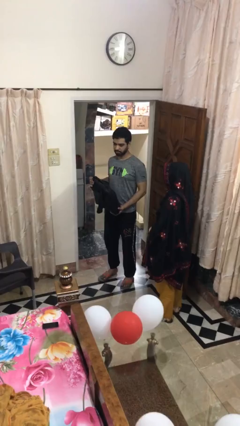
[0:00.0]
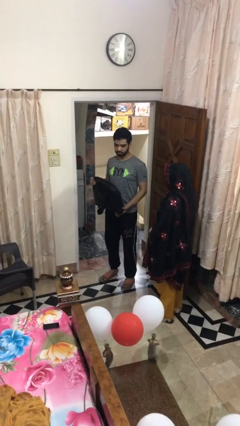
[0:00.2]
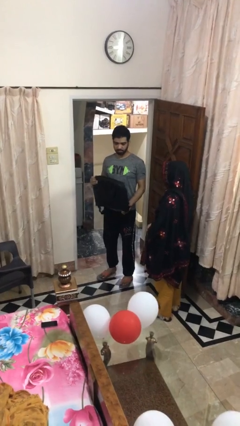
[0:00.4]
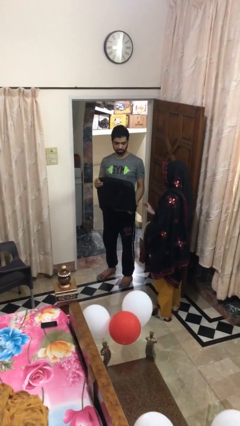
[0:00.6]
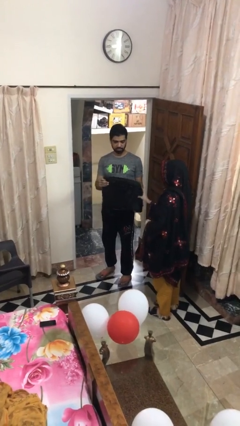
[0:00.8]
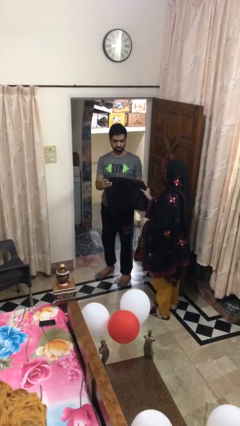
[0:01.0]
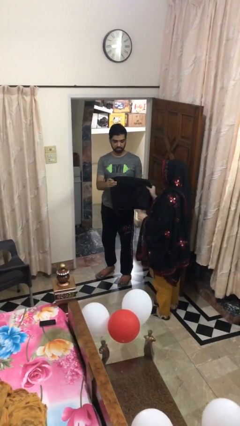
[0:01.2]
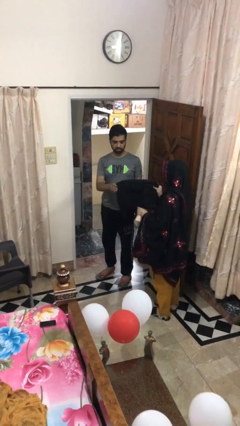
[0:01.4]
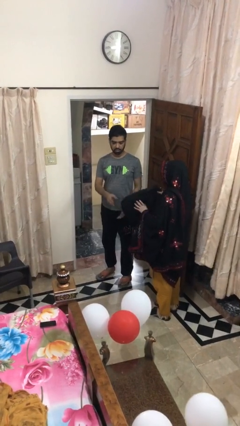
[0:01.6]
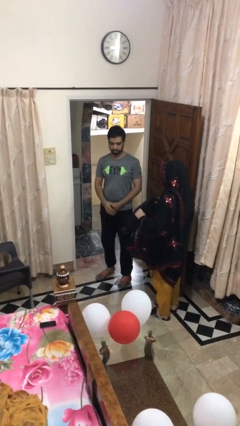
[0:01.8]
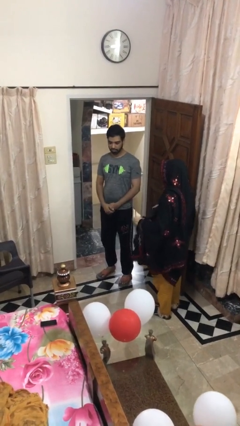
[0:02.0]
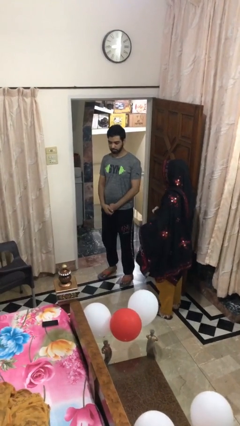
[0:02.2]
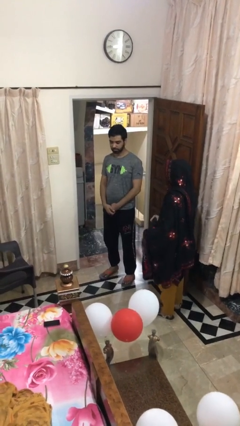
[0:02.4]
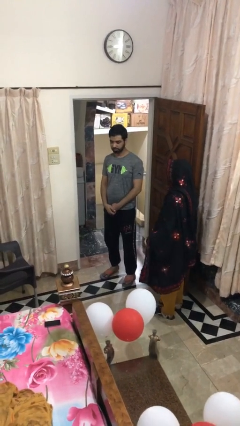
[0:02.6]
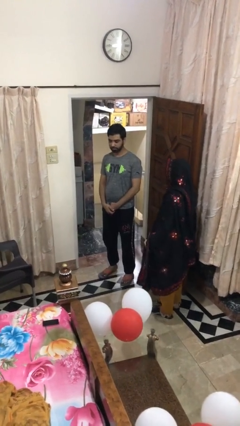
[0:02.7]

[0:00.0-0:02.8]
person transfers object to person

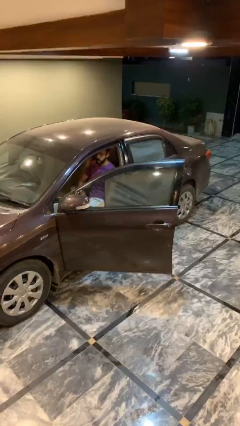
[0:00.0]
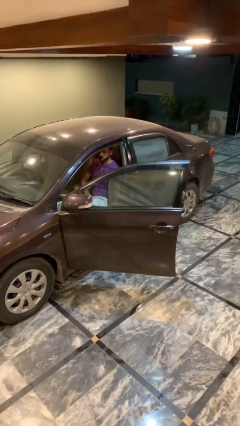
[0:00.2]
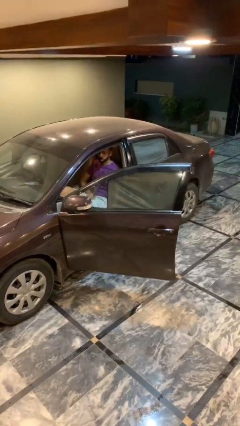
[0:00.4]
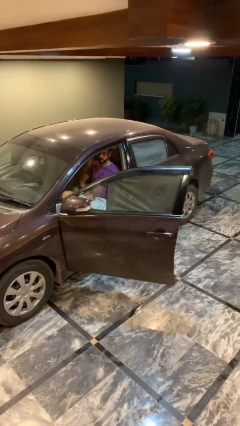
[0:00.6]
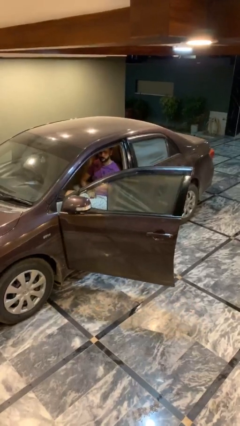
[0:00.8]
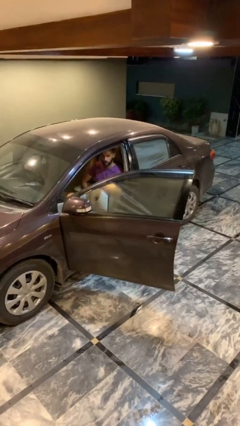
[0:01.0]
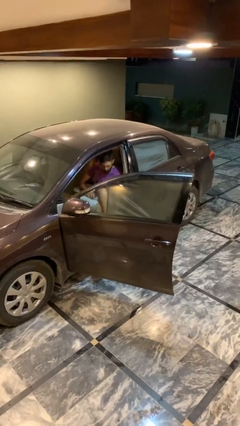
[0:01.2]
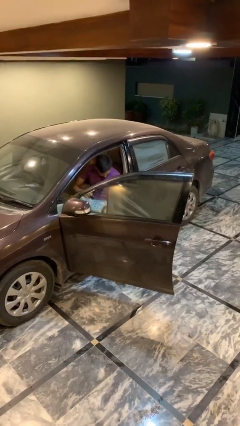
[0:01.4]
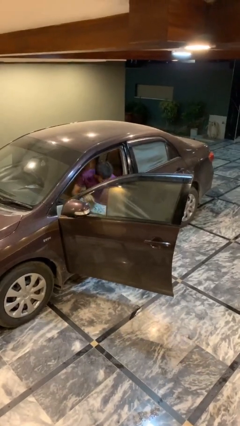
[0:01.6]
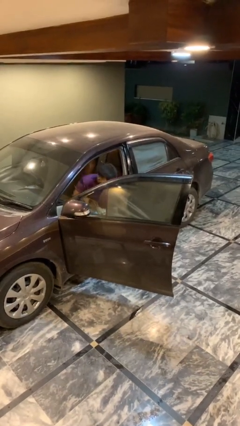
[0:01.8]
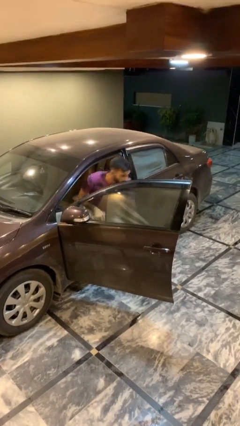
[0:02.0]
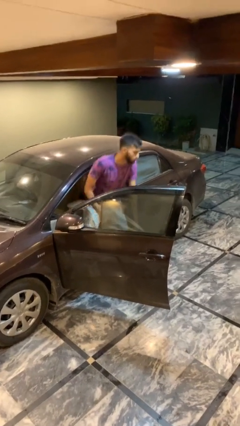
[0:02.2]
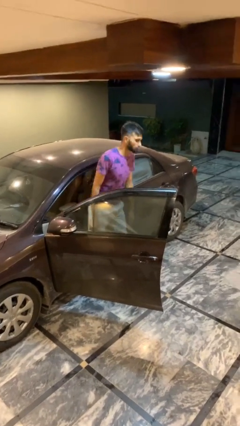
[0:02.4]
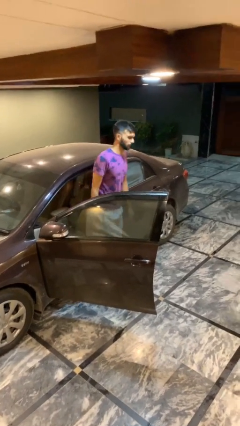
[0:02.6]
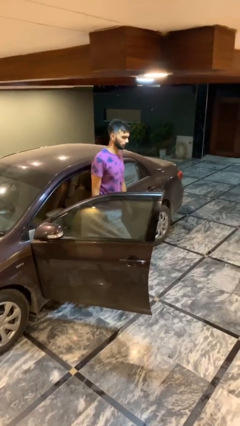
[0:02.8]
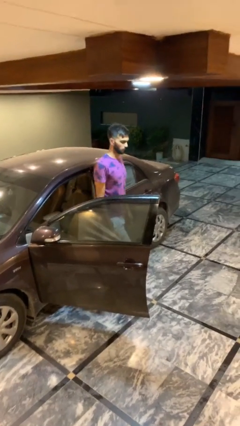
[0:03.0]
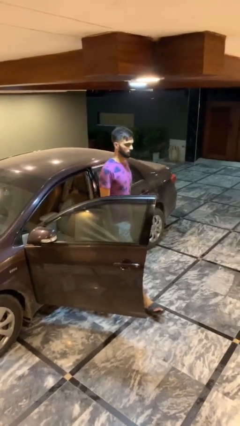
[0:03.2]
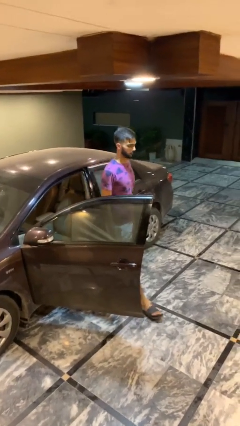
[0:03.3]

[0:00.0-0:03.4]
person exits car

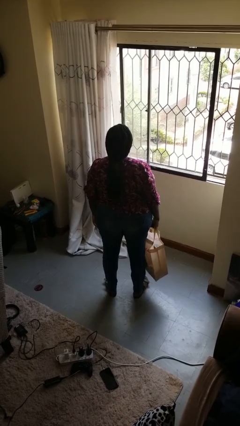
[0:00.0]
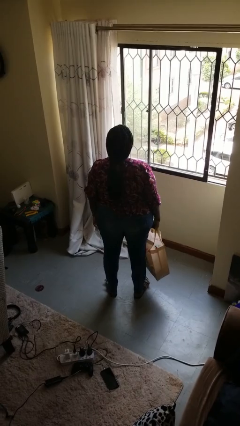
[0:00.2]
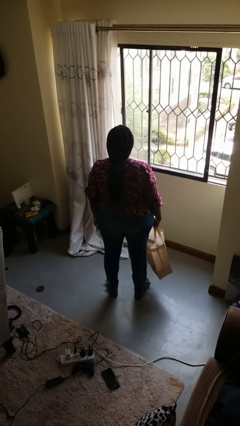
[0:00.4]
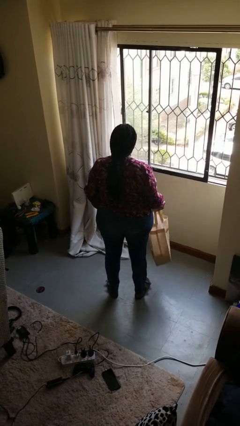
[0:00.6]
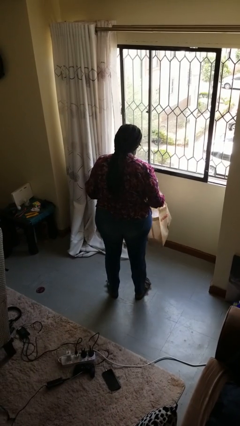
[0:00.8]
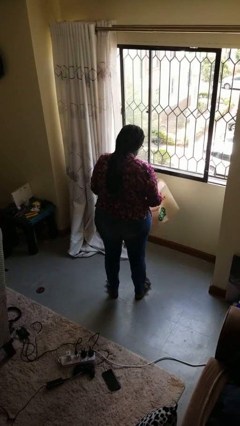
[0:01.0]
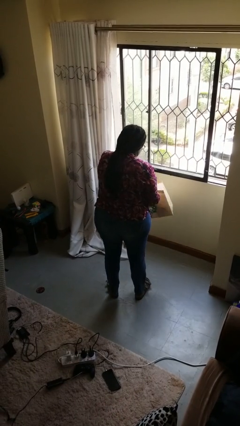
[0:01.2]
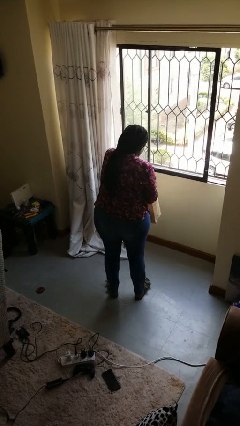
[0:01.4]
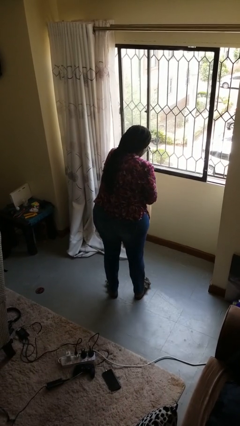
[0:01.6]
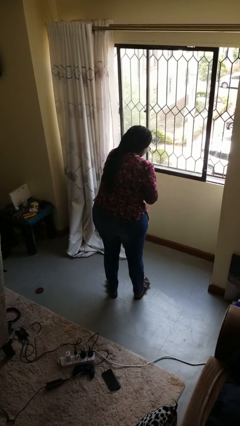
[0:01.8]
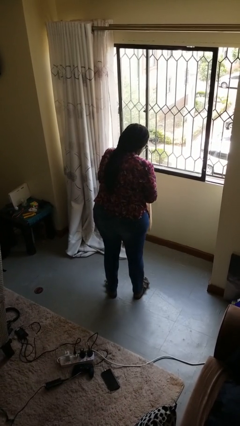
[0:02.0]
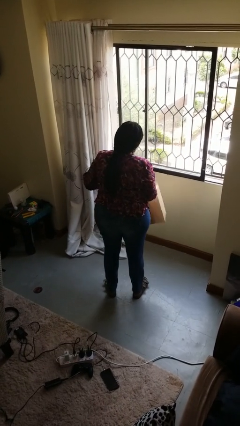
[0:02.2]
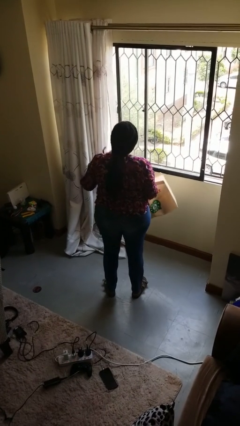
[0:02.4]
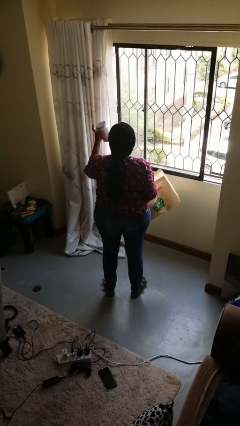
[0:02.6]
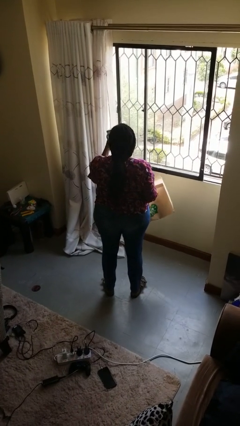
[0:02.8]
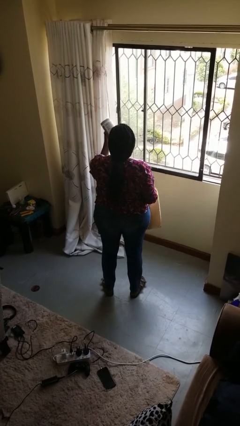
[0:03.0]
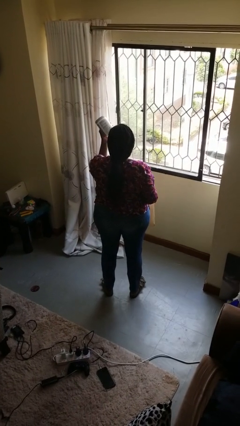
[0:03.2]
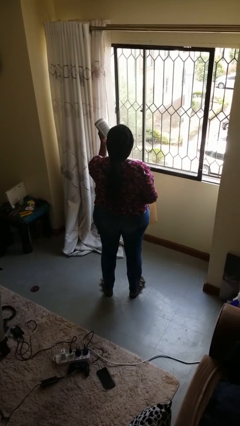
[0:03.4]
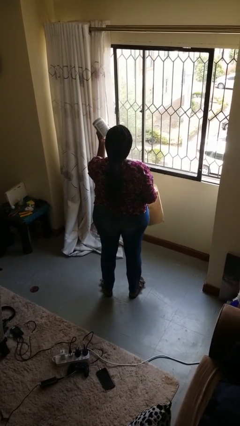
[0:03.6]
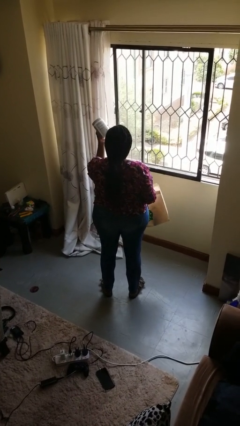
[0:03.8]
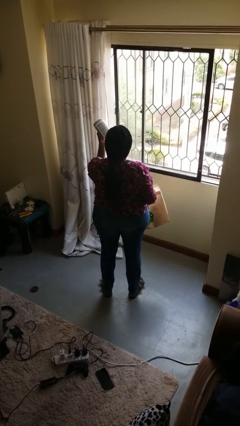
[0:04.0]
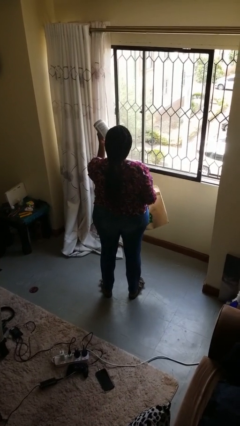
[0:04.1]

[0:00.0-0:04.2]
person takes object from bag

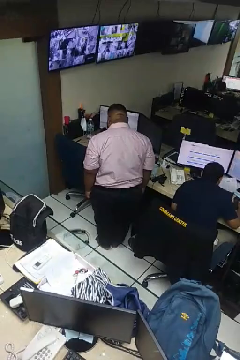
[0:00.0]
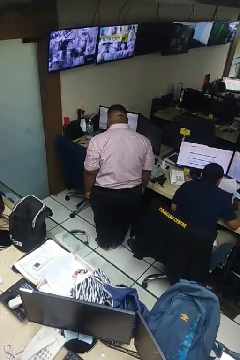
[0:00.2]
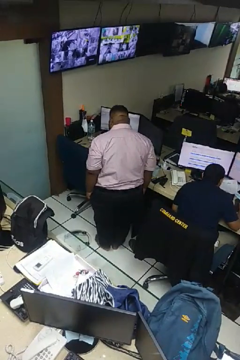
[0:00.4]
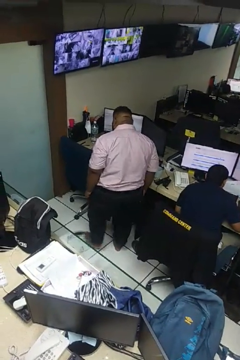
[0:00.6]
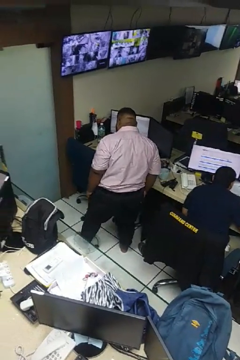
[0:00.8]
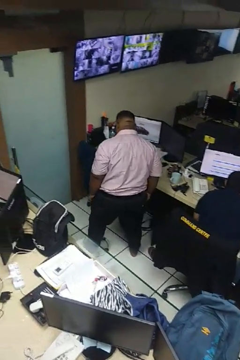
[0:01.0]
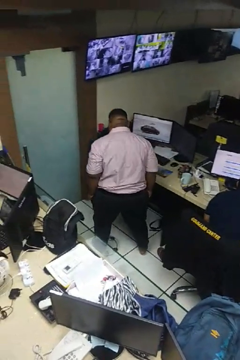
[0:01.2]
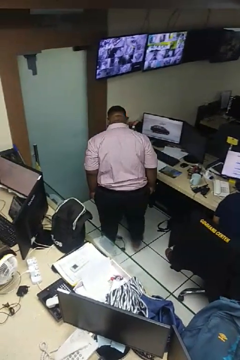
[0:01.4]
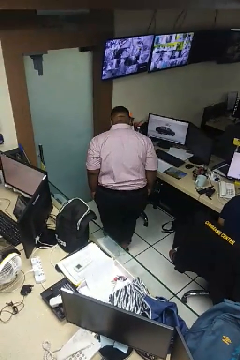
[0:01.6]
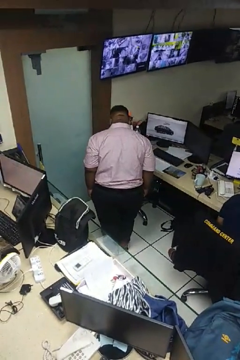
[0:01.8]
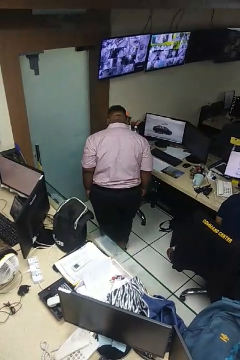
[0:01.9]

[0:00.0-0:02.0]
person uses bodyweight scale

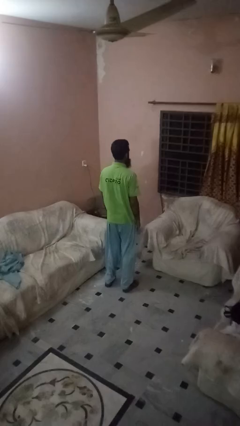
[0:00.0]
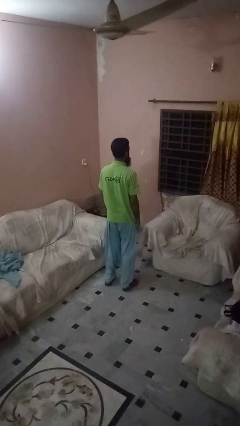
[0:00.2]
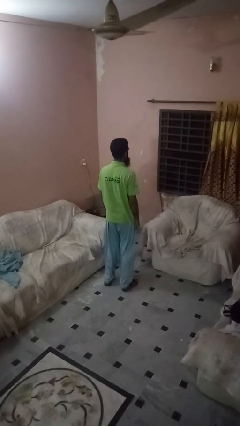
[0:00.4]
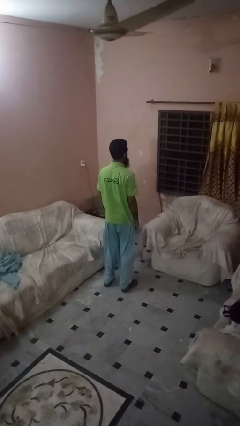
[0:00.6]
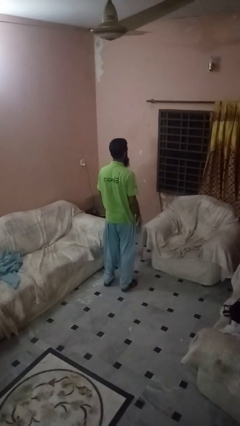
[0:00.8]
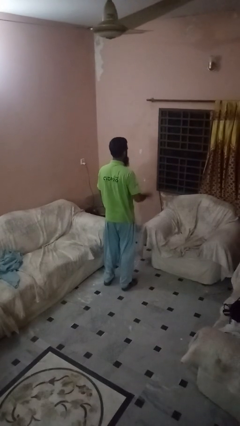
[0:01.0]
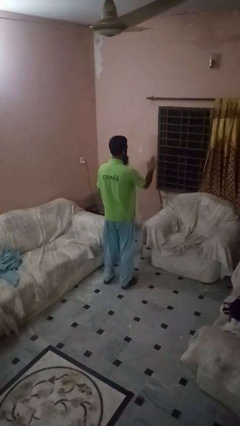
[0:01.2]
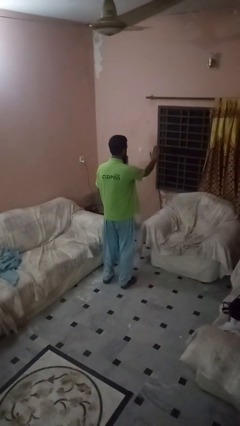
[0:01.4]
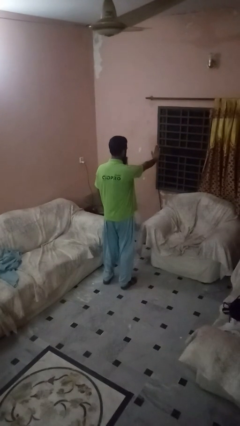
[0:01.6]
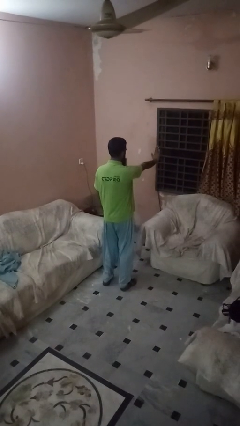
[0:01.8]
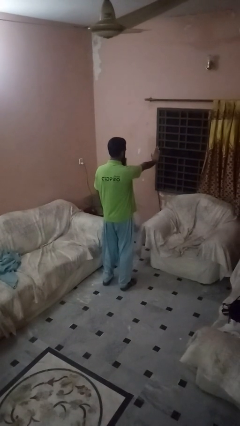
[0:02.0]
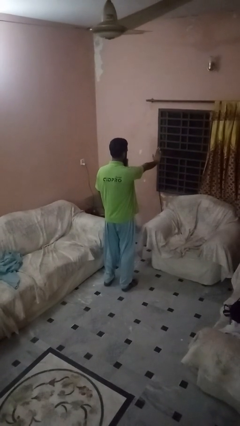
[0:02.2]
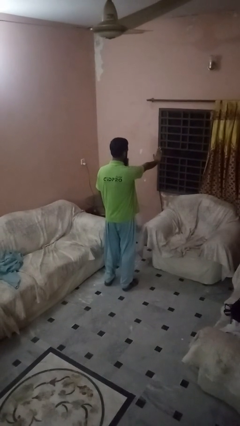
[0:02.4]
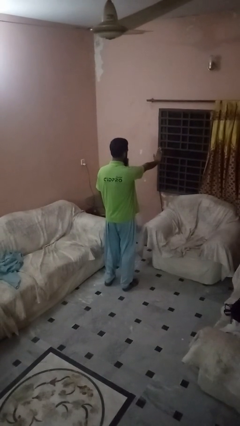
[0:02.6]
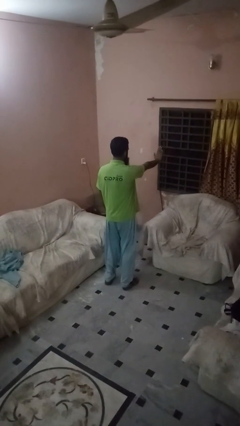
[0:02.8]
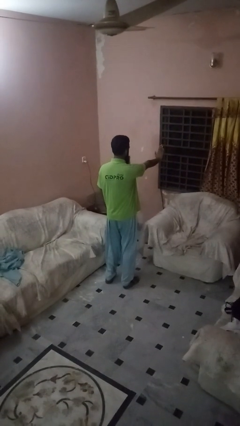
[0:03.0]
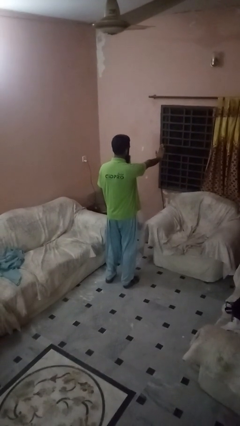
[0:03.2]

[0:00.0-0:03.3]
person gestures stop

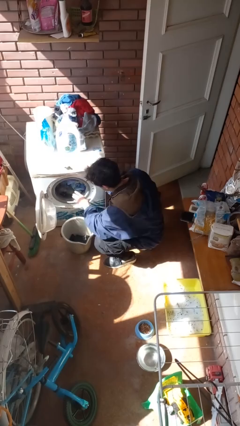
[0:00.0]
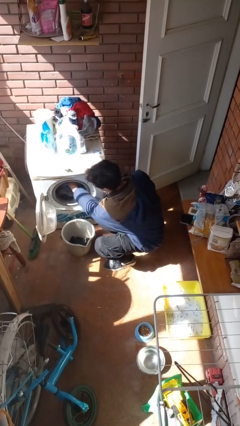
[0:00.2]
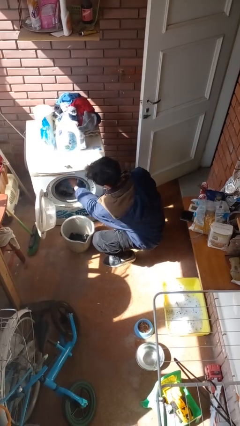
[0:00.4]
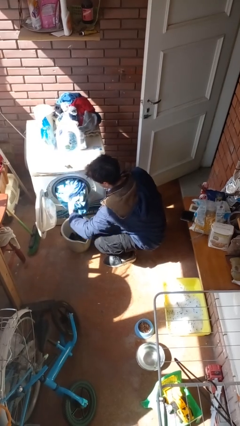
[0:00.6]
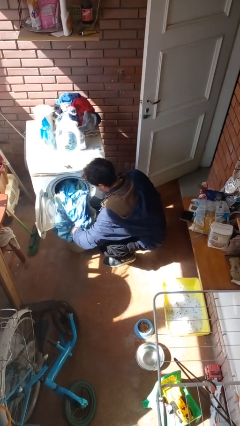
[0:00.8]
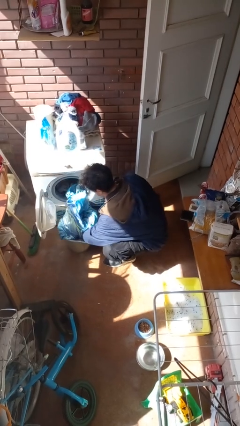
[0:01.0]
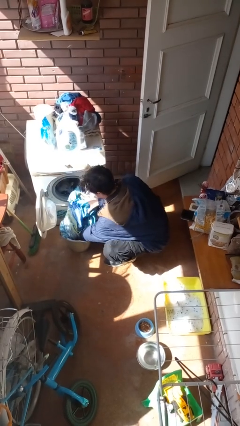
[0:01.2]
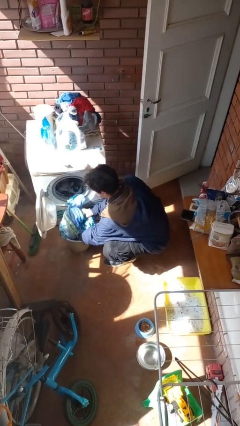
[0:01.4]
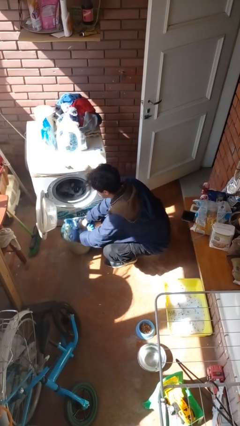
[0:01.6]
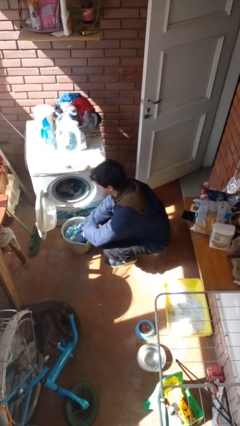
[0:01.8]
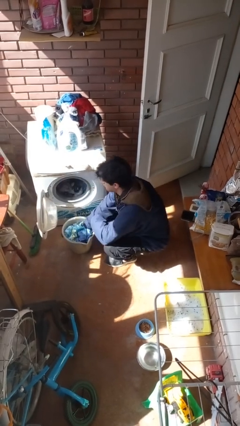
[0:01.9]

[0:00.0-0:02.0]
person unloads clotheswasher
